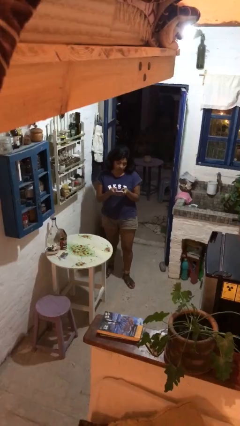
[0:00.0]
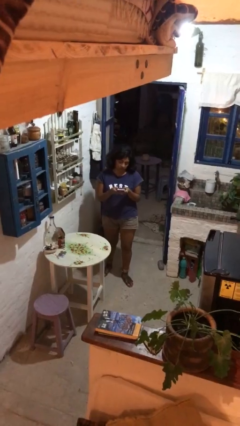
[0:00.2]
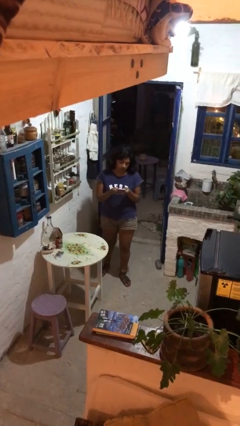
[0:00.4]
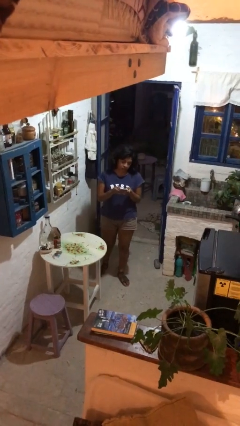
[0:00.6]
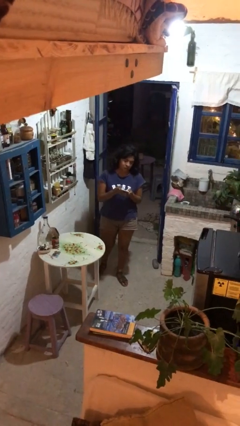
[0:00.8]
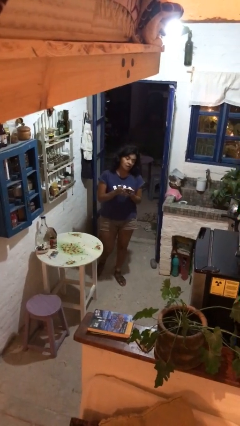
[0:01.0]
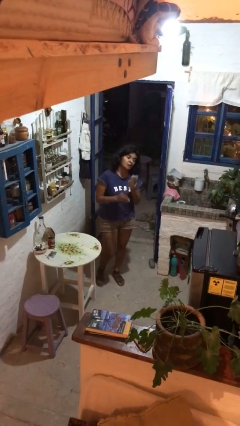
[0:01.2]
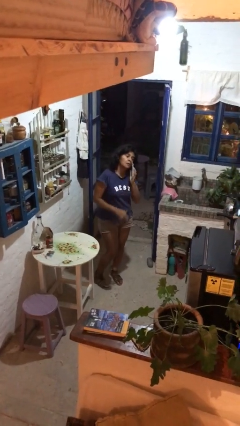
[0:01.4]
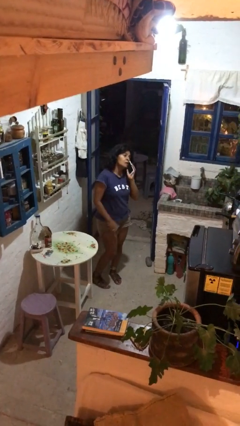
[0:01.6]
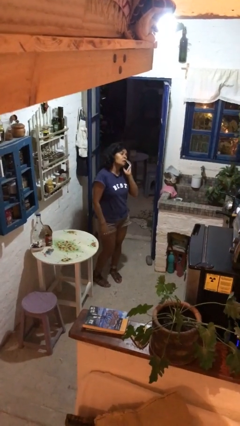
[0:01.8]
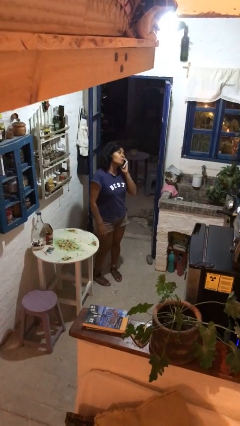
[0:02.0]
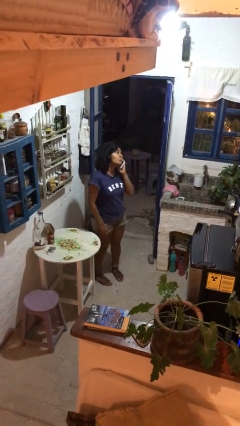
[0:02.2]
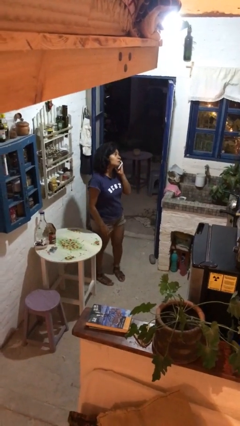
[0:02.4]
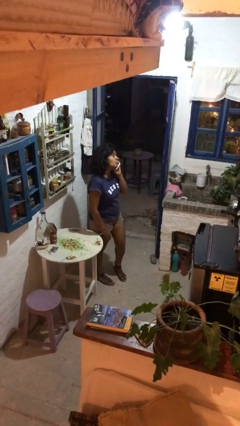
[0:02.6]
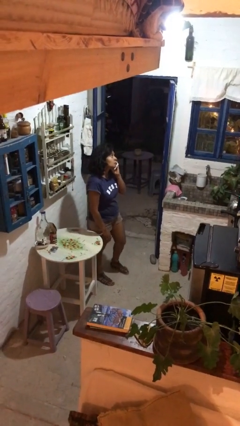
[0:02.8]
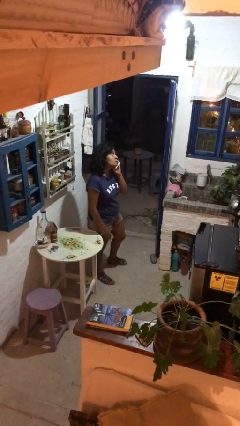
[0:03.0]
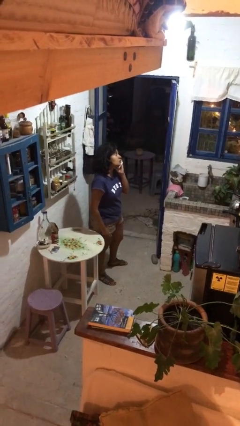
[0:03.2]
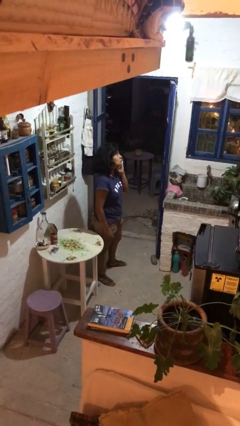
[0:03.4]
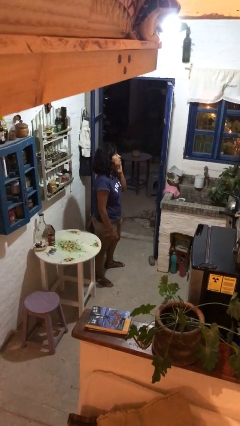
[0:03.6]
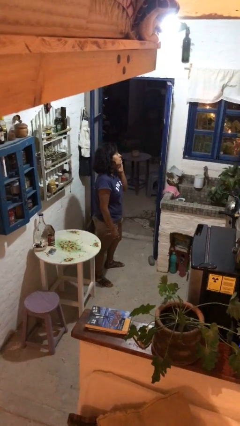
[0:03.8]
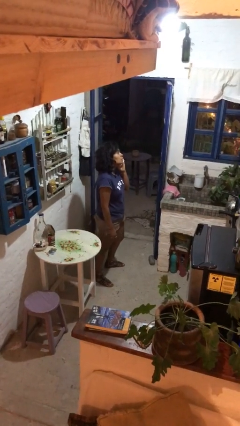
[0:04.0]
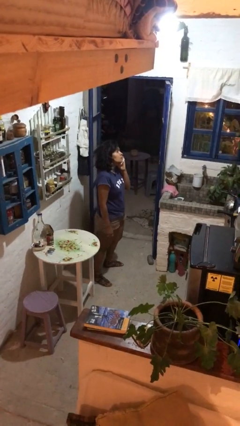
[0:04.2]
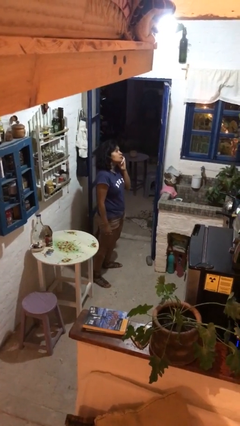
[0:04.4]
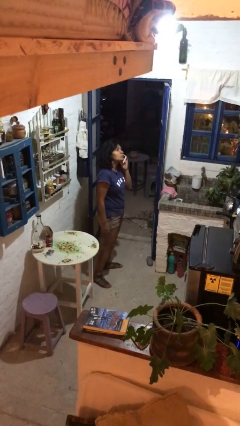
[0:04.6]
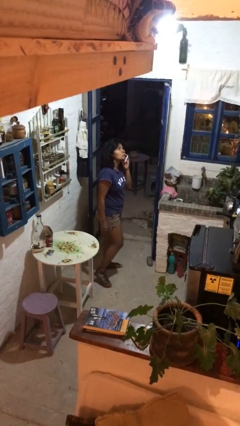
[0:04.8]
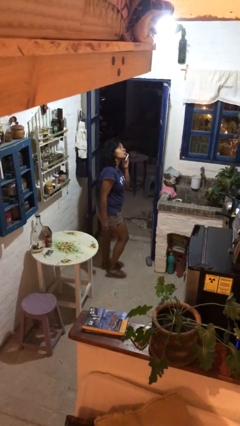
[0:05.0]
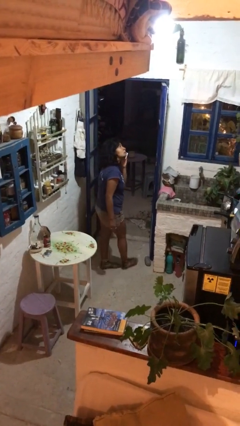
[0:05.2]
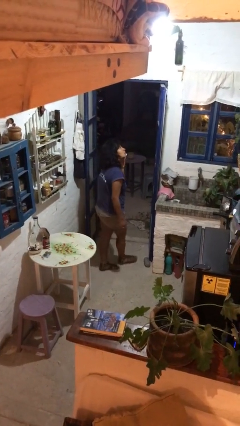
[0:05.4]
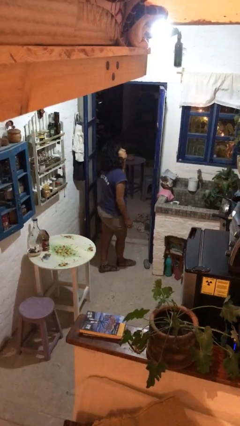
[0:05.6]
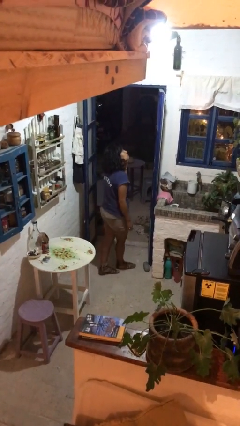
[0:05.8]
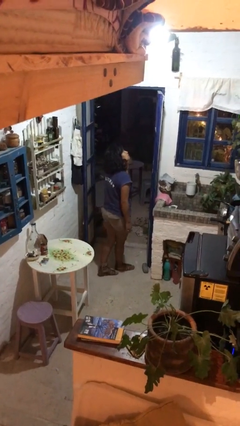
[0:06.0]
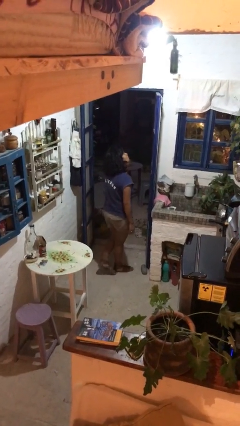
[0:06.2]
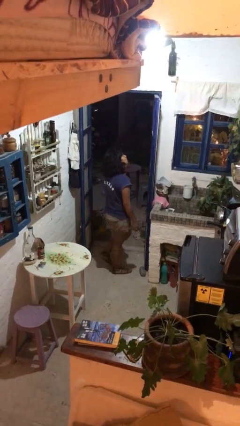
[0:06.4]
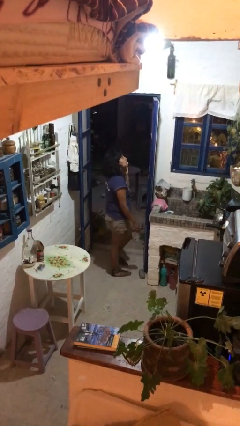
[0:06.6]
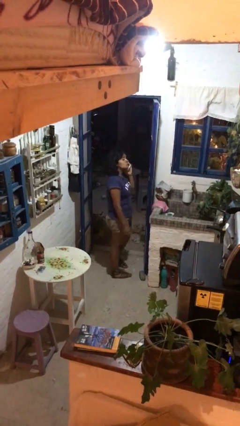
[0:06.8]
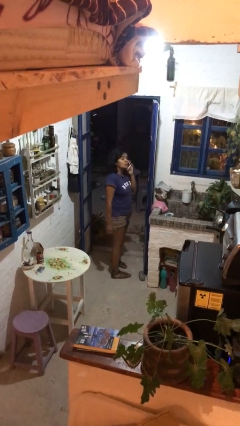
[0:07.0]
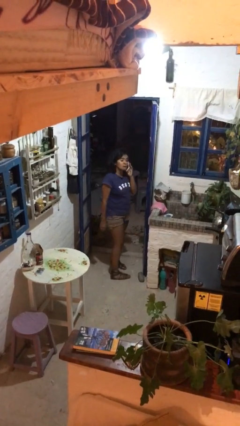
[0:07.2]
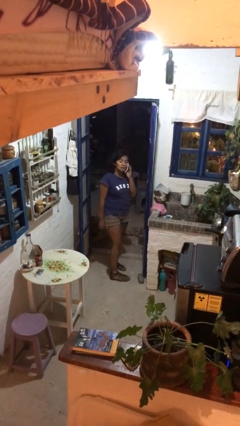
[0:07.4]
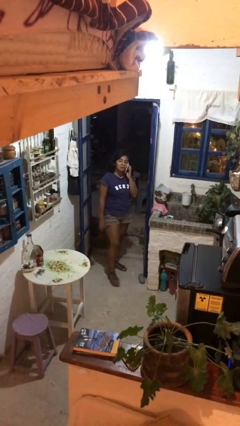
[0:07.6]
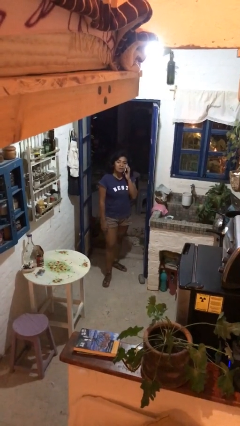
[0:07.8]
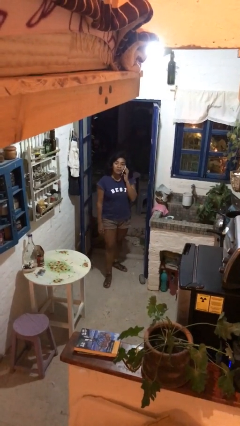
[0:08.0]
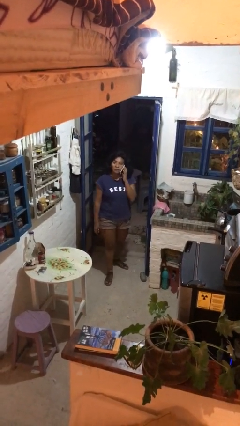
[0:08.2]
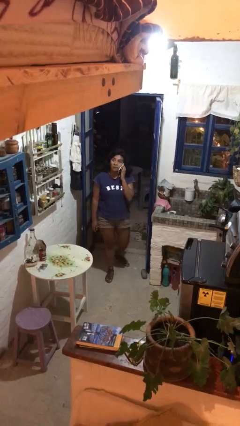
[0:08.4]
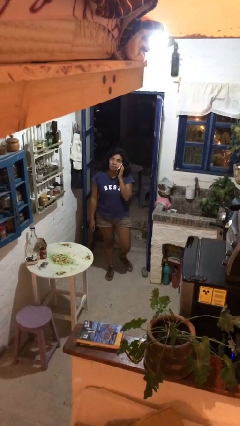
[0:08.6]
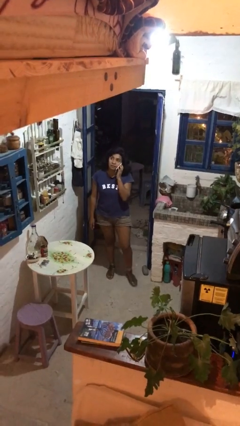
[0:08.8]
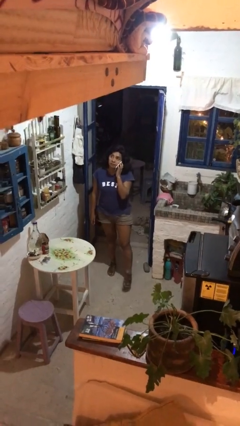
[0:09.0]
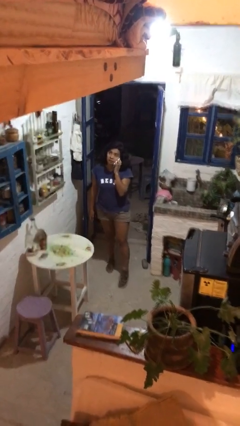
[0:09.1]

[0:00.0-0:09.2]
person talks on phone

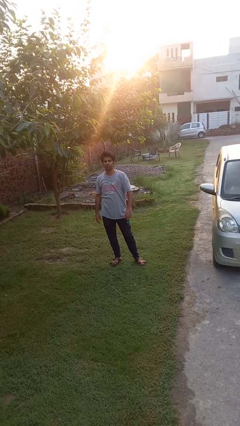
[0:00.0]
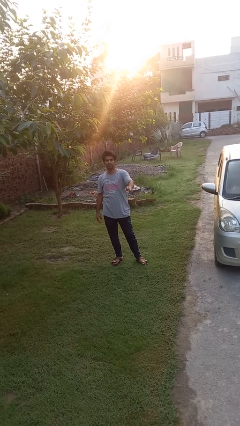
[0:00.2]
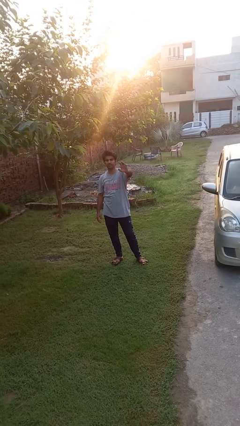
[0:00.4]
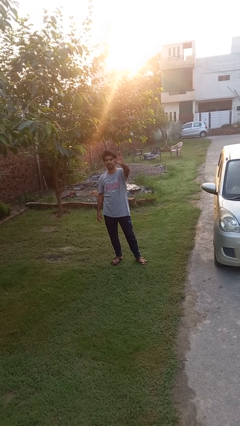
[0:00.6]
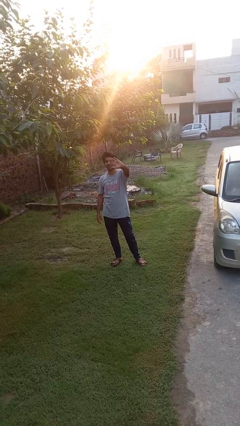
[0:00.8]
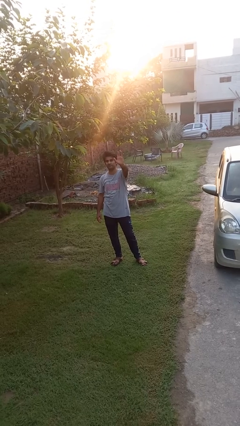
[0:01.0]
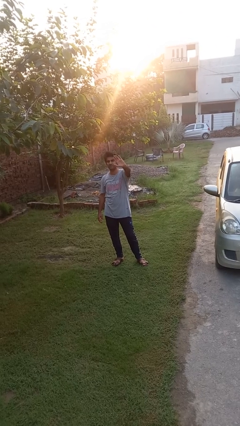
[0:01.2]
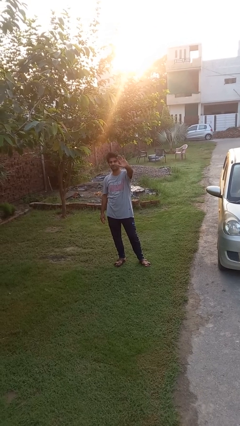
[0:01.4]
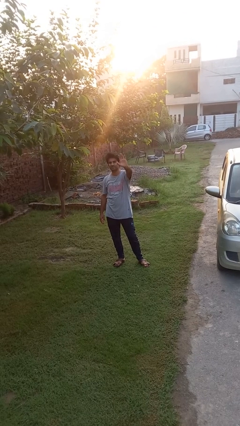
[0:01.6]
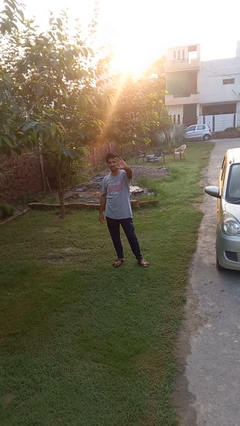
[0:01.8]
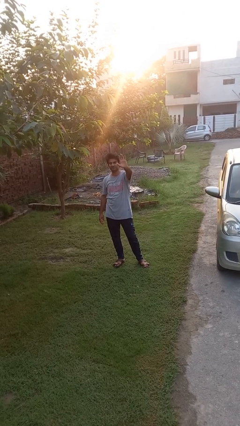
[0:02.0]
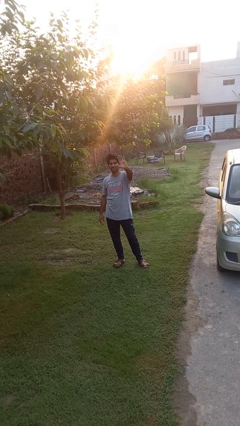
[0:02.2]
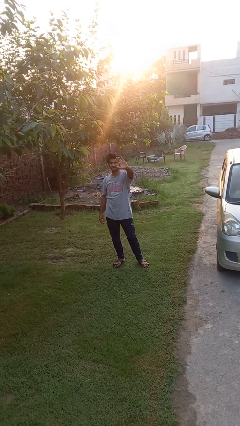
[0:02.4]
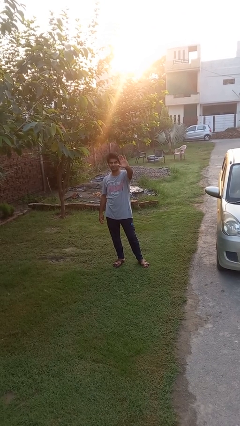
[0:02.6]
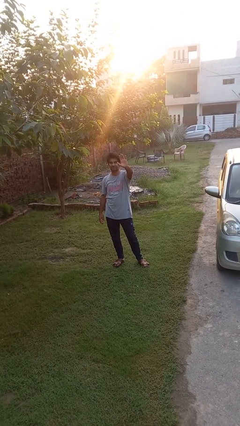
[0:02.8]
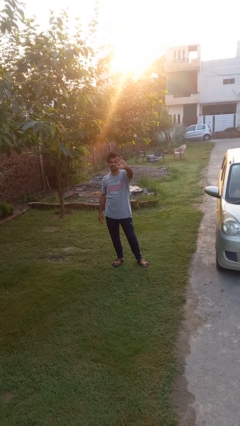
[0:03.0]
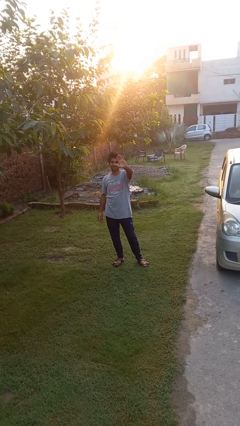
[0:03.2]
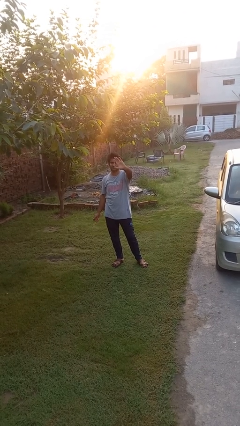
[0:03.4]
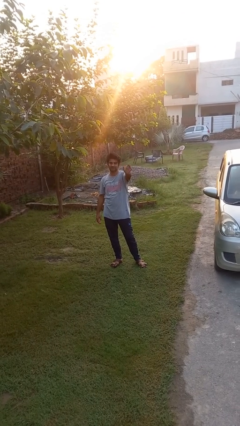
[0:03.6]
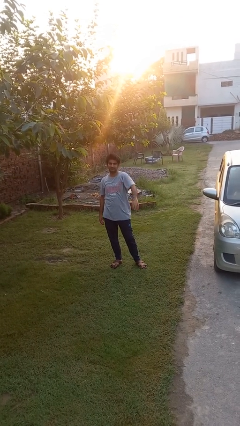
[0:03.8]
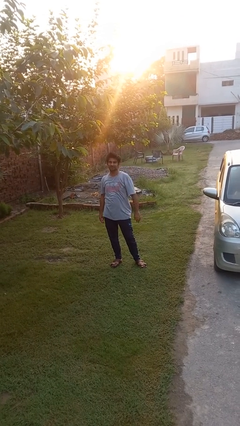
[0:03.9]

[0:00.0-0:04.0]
person waves at person

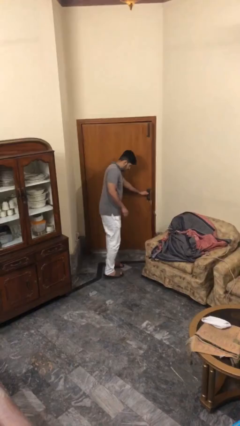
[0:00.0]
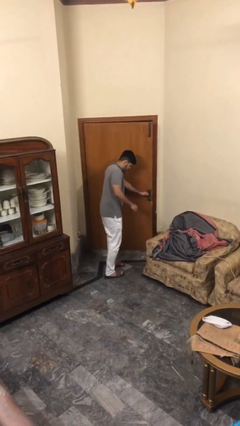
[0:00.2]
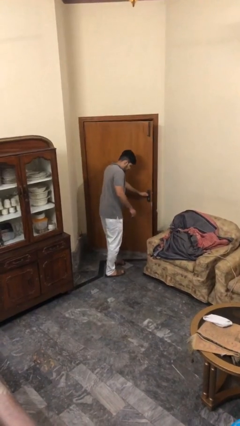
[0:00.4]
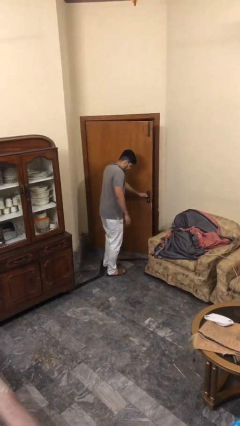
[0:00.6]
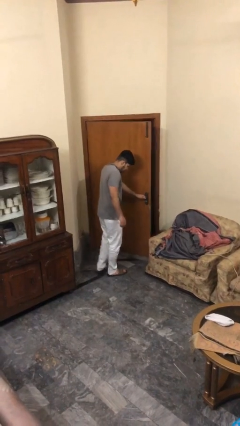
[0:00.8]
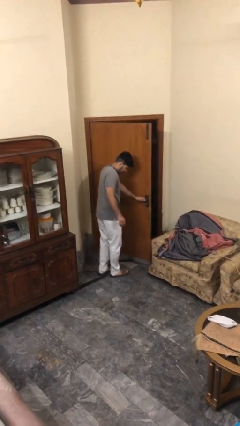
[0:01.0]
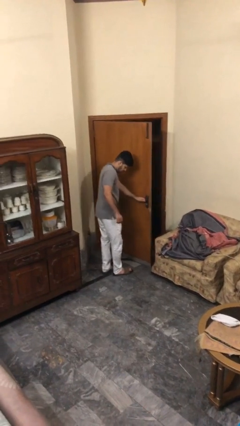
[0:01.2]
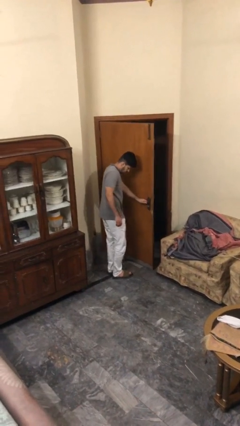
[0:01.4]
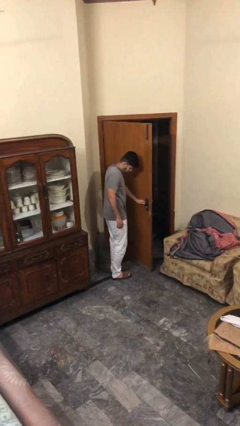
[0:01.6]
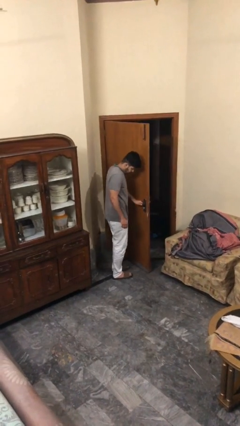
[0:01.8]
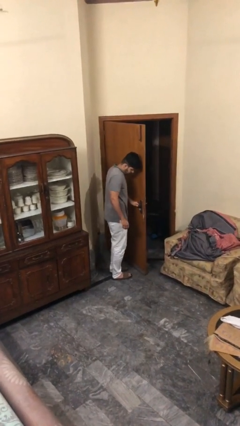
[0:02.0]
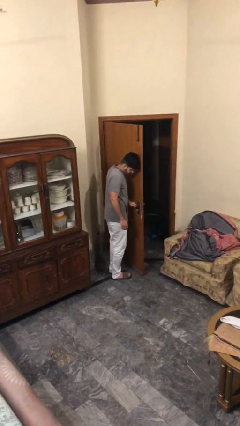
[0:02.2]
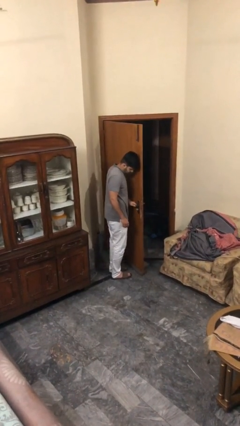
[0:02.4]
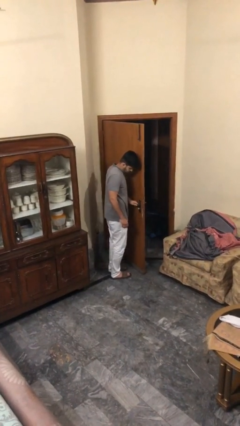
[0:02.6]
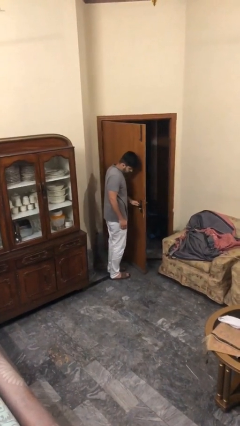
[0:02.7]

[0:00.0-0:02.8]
person opens facility door

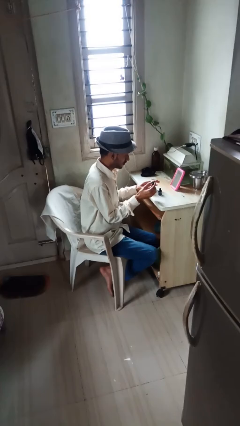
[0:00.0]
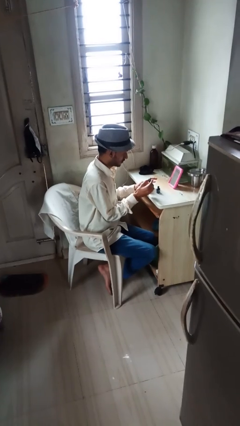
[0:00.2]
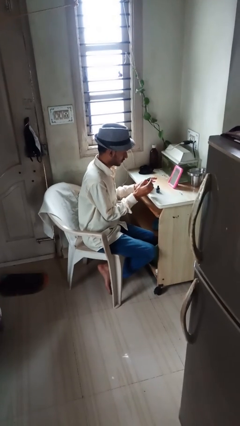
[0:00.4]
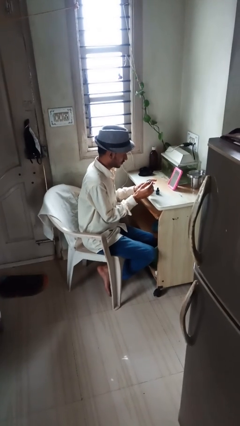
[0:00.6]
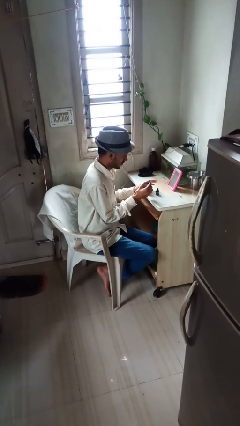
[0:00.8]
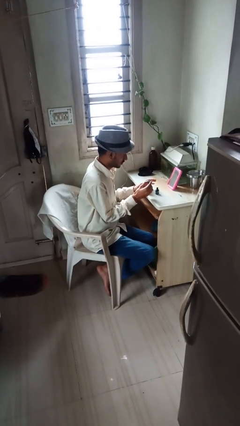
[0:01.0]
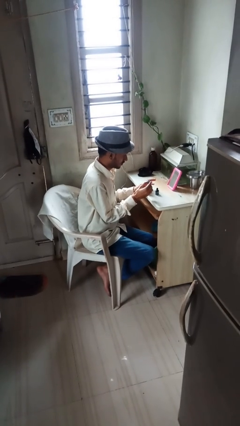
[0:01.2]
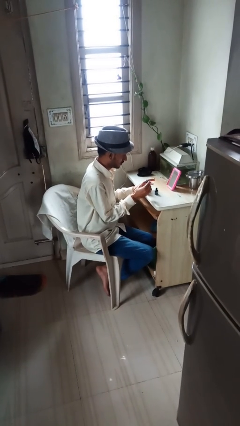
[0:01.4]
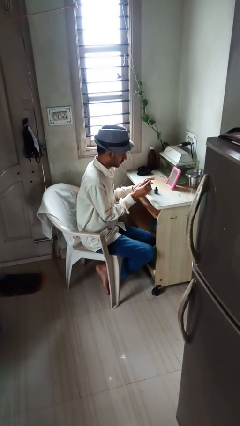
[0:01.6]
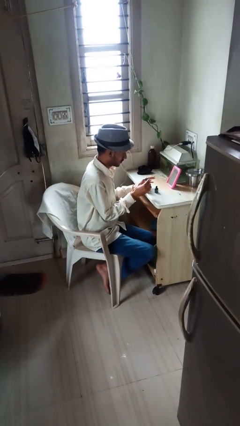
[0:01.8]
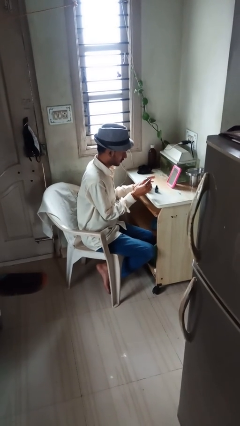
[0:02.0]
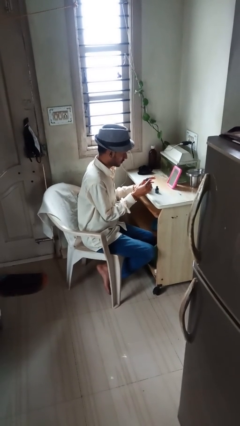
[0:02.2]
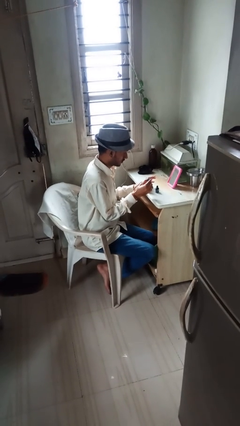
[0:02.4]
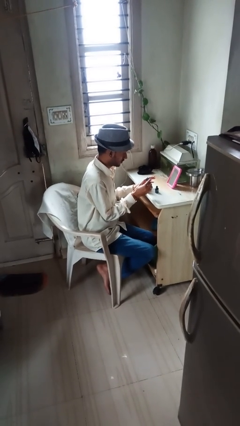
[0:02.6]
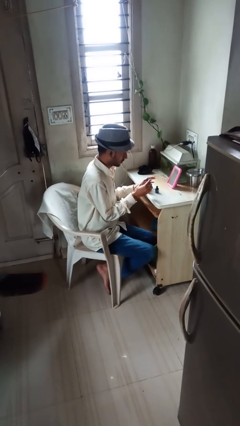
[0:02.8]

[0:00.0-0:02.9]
person paints fingernails
